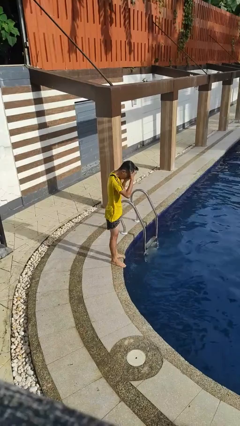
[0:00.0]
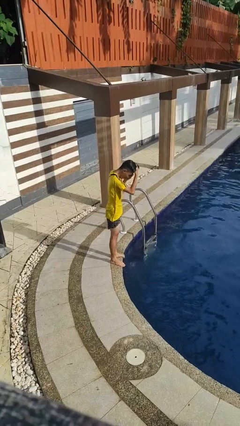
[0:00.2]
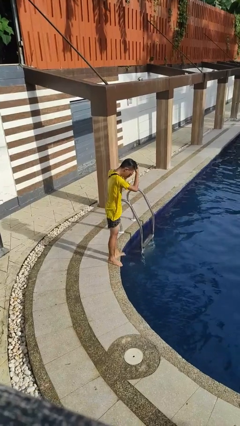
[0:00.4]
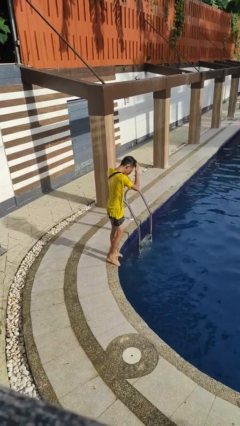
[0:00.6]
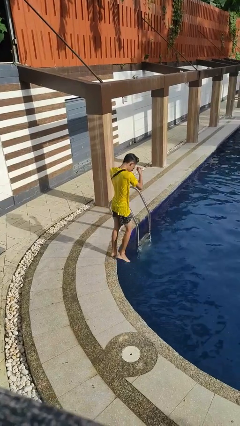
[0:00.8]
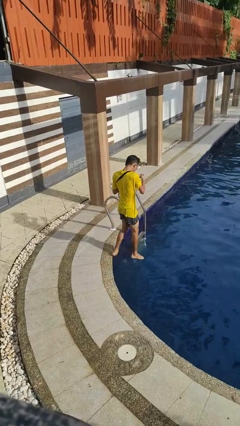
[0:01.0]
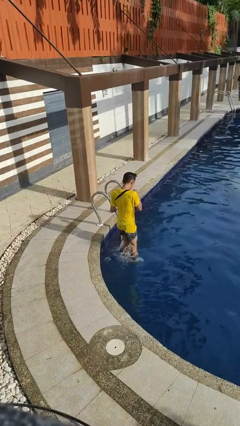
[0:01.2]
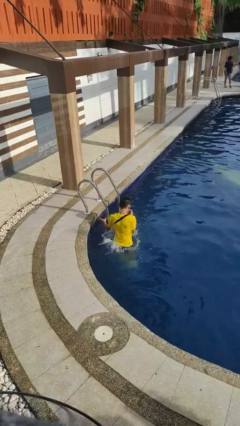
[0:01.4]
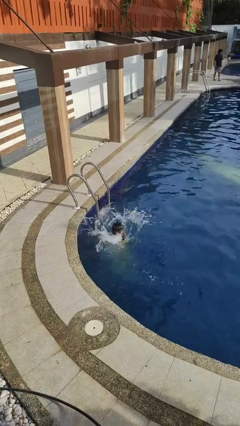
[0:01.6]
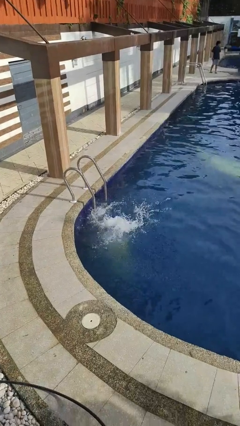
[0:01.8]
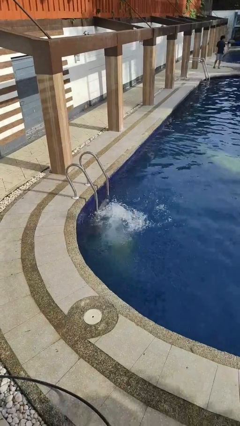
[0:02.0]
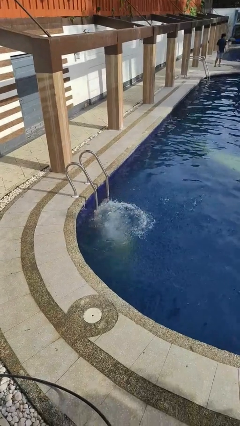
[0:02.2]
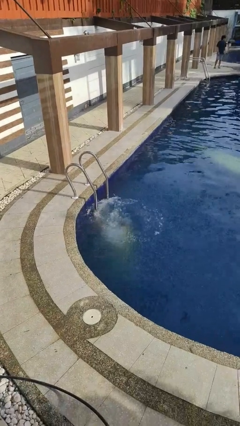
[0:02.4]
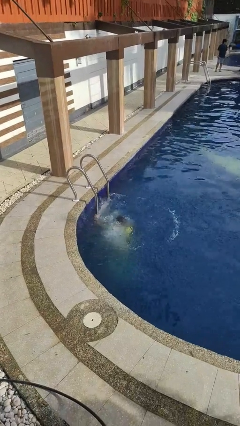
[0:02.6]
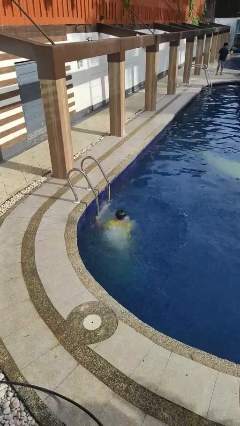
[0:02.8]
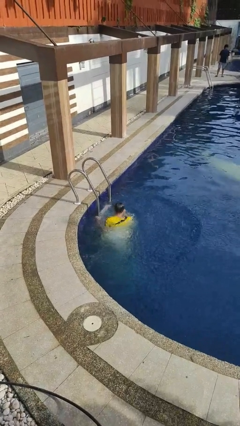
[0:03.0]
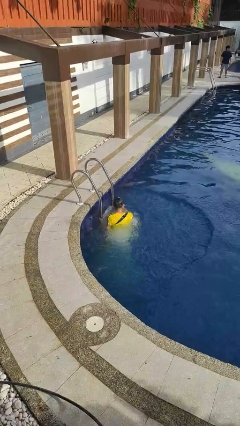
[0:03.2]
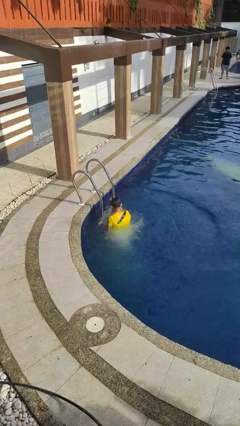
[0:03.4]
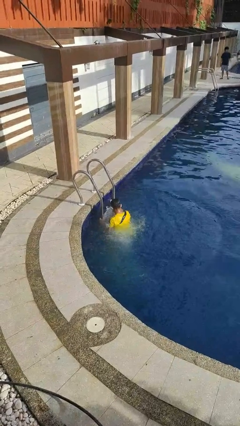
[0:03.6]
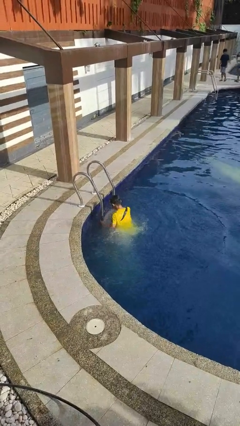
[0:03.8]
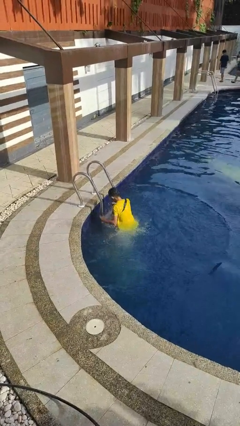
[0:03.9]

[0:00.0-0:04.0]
person falls into pool

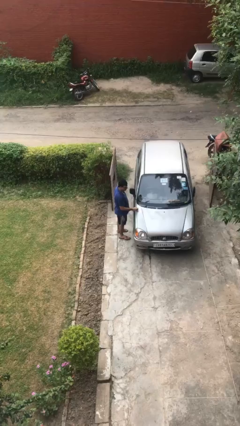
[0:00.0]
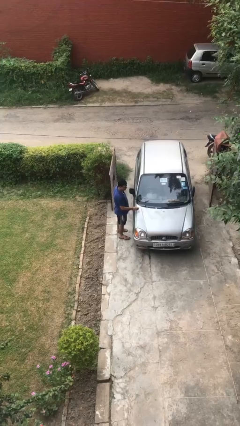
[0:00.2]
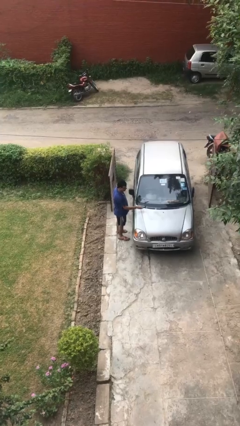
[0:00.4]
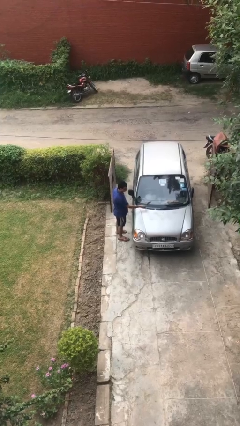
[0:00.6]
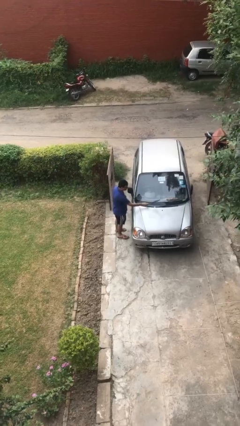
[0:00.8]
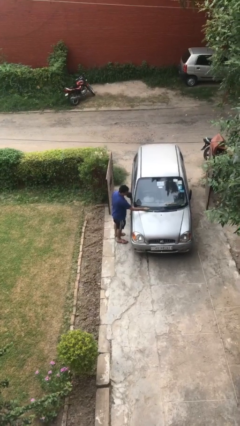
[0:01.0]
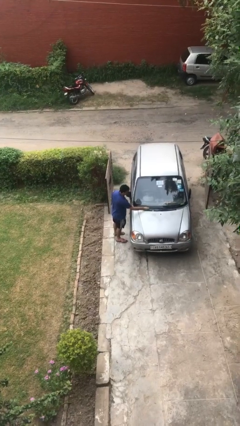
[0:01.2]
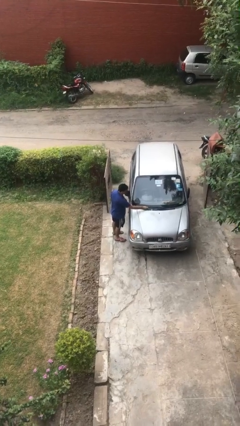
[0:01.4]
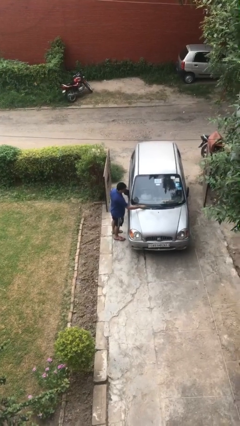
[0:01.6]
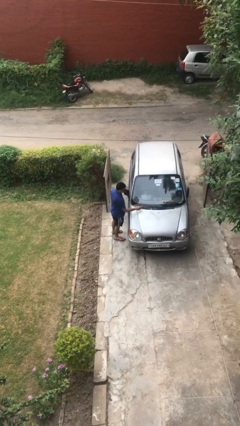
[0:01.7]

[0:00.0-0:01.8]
person flips down car wipers

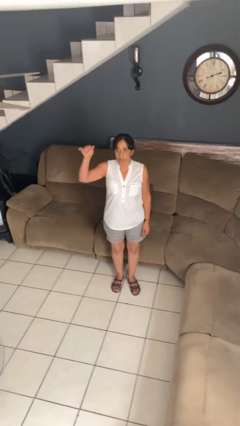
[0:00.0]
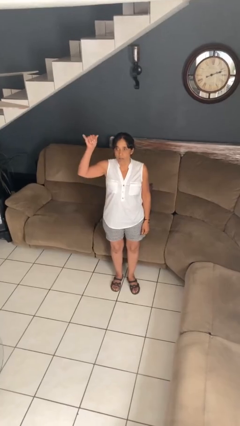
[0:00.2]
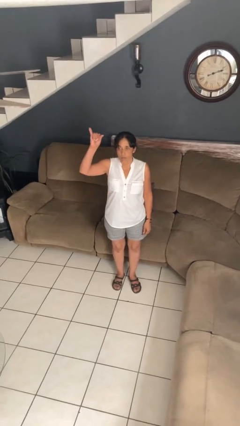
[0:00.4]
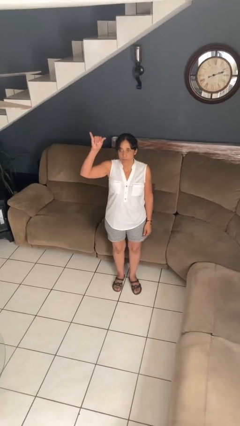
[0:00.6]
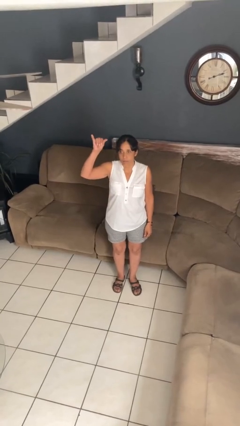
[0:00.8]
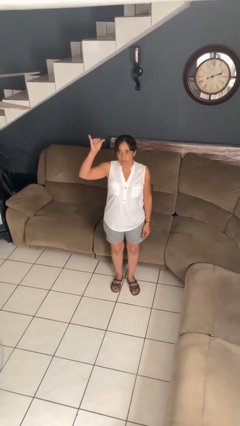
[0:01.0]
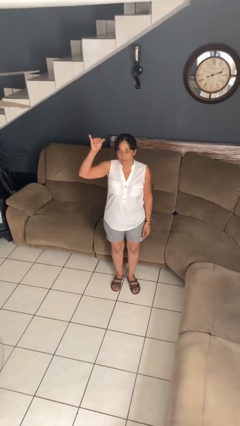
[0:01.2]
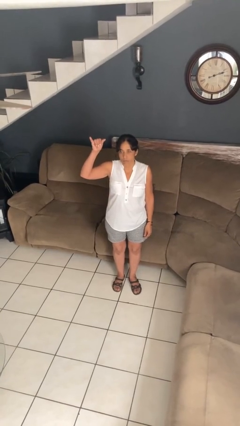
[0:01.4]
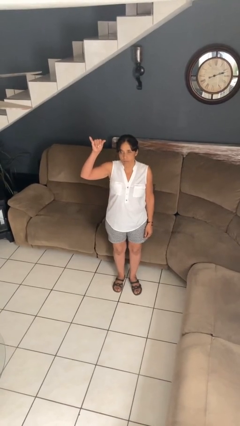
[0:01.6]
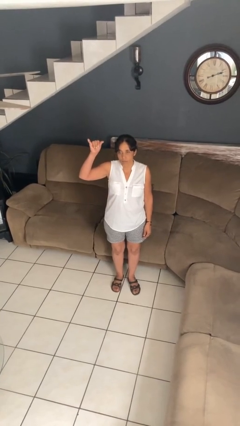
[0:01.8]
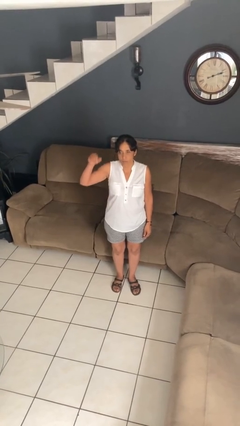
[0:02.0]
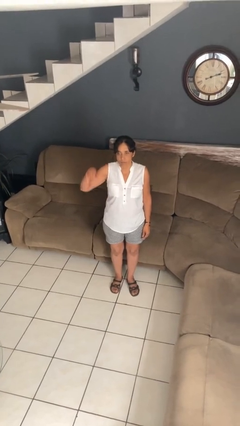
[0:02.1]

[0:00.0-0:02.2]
person gestures hang loose

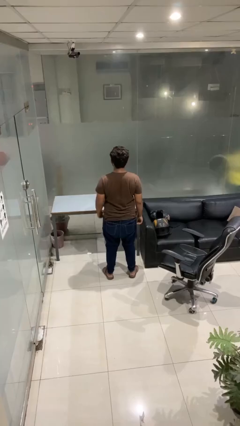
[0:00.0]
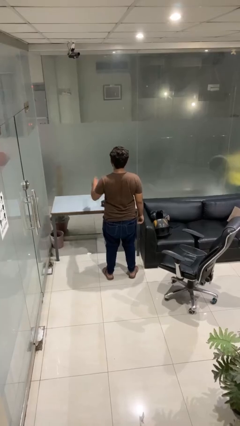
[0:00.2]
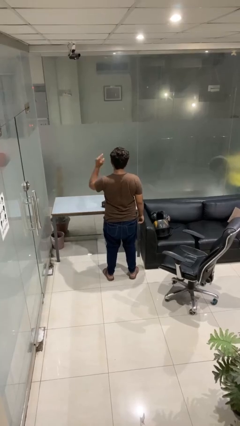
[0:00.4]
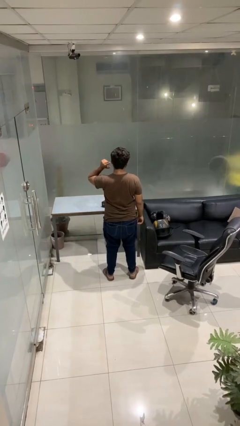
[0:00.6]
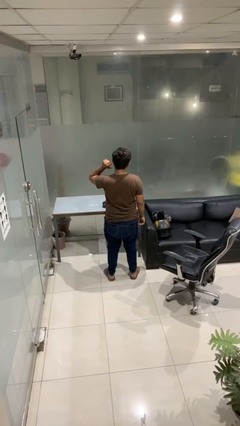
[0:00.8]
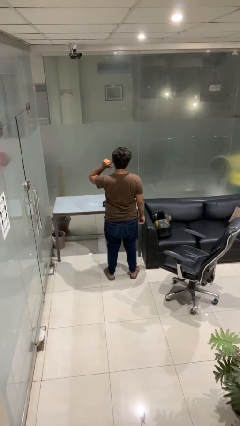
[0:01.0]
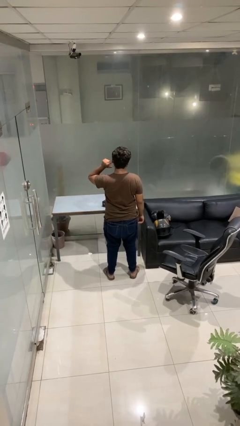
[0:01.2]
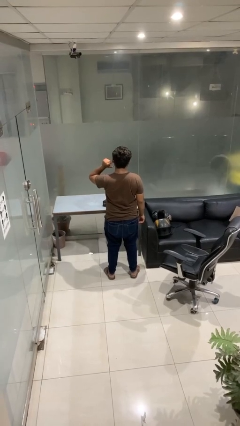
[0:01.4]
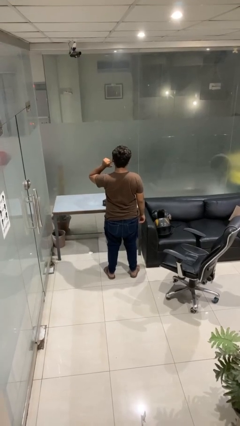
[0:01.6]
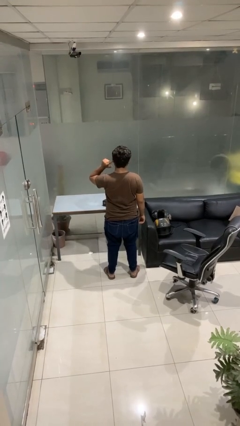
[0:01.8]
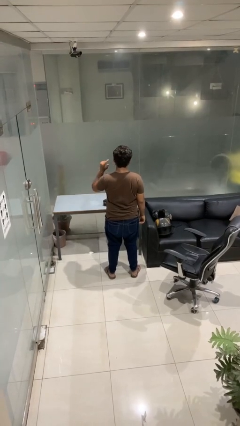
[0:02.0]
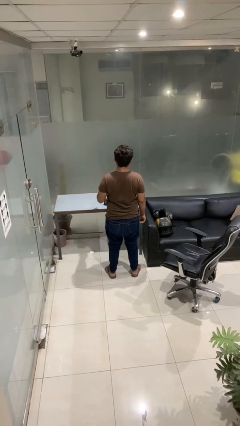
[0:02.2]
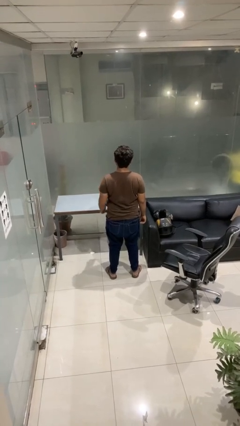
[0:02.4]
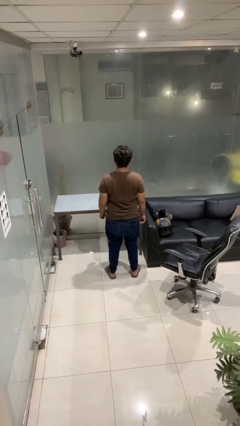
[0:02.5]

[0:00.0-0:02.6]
person gestures listen closely

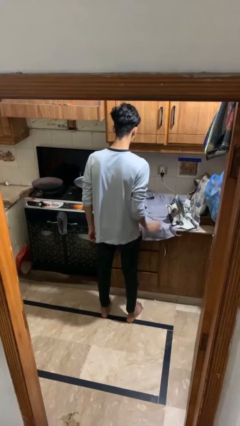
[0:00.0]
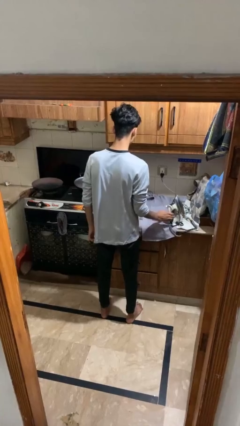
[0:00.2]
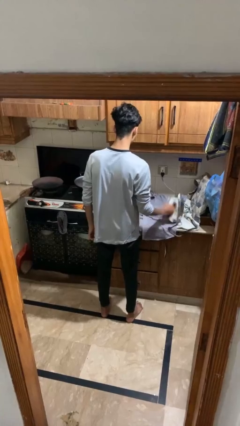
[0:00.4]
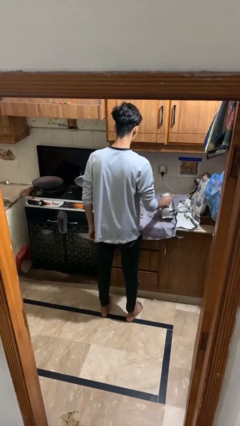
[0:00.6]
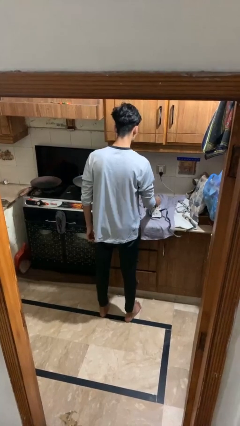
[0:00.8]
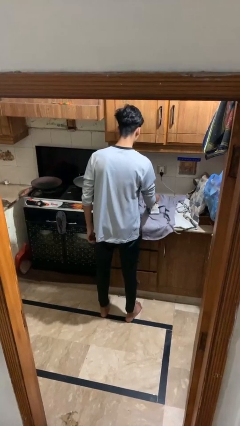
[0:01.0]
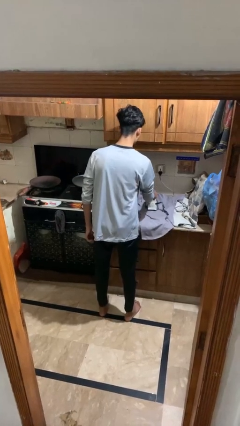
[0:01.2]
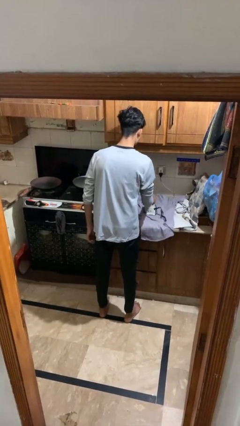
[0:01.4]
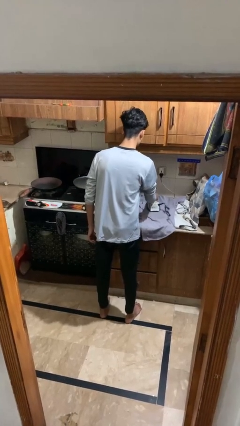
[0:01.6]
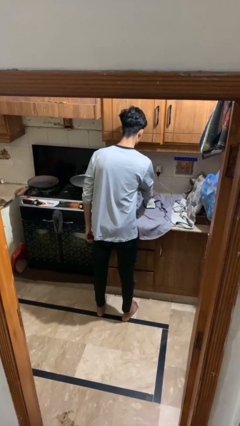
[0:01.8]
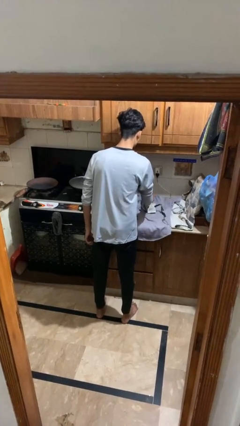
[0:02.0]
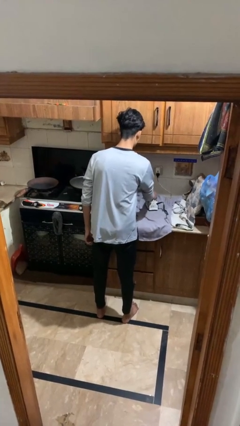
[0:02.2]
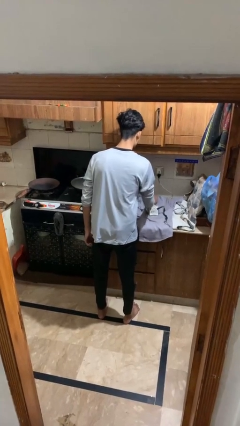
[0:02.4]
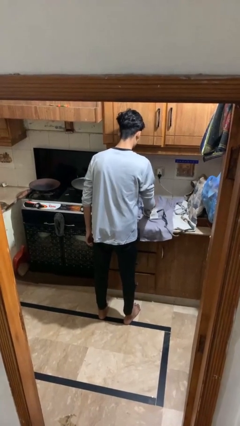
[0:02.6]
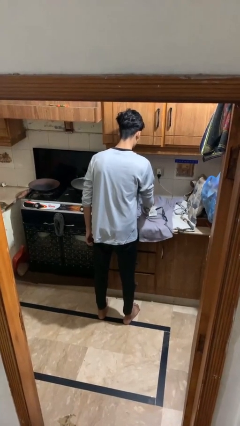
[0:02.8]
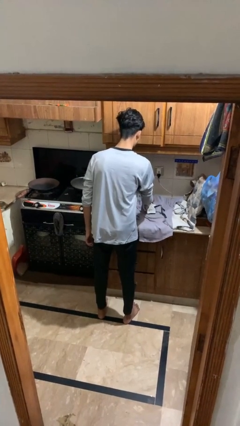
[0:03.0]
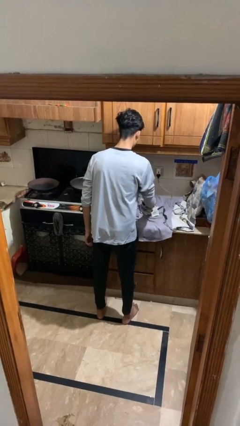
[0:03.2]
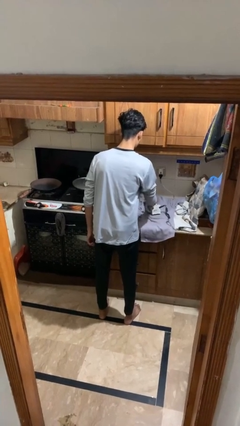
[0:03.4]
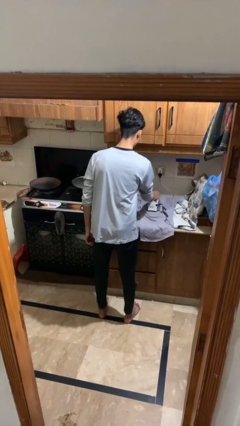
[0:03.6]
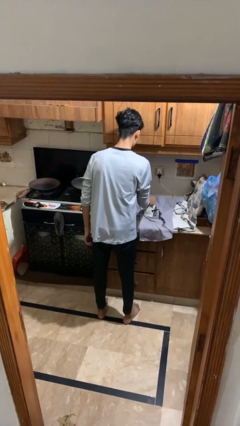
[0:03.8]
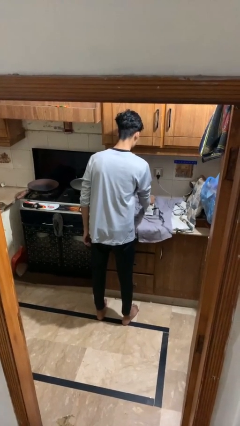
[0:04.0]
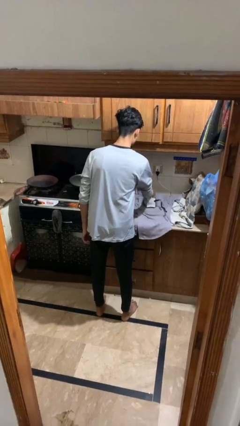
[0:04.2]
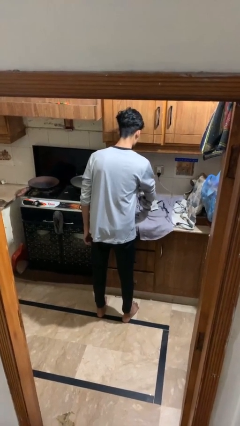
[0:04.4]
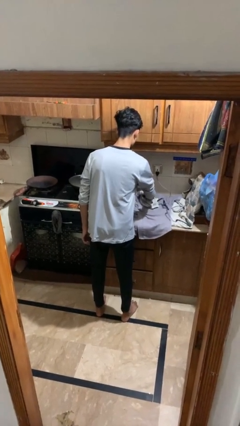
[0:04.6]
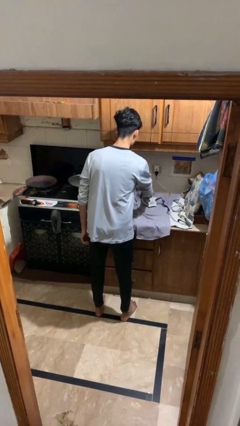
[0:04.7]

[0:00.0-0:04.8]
person irons clothes

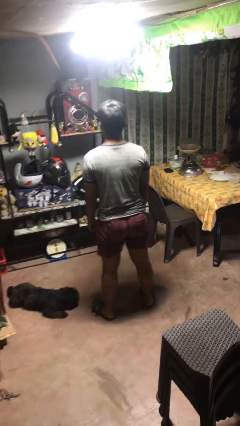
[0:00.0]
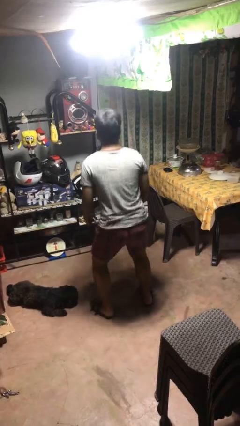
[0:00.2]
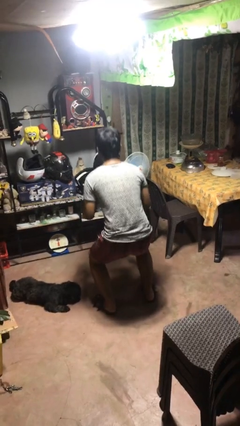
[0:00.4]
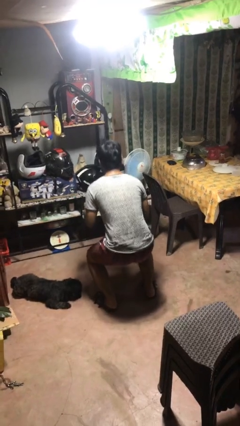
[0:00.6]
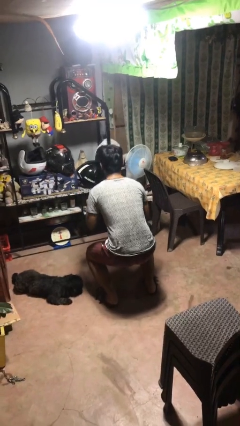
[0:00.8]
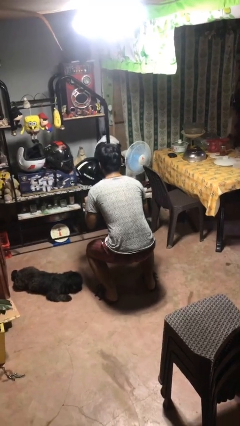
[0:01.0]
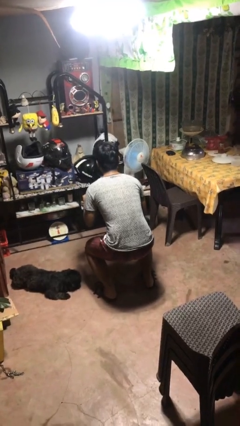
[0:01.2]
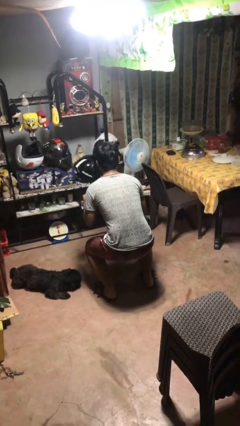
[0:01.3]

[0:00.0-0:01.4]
person squats

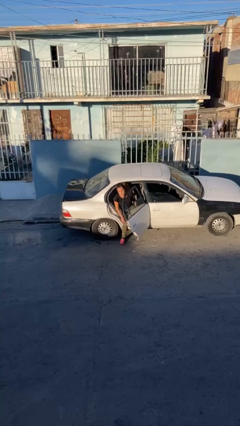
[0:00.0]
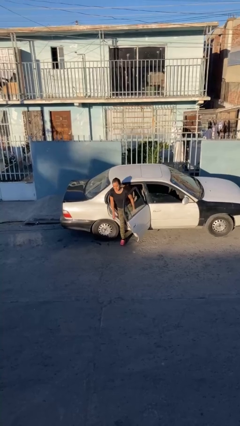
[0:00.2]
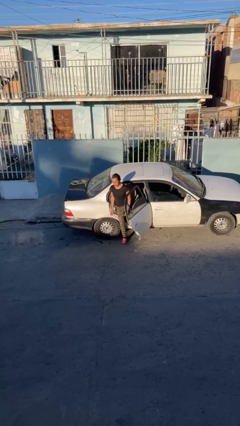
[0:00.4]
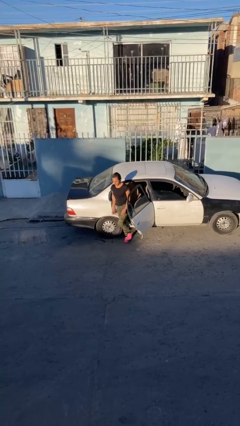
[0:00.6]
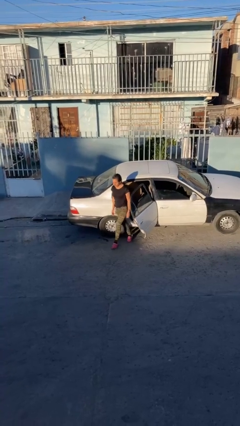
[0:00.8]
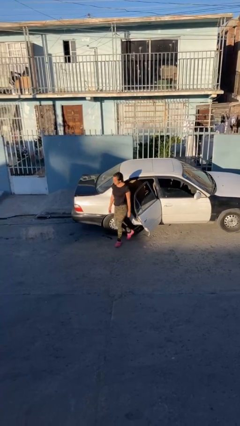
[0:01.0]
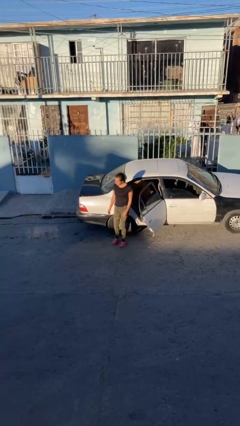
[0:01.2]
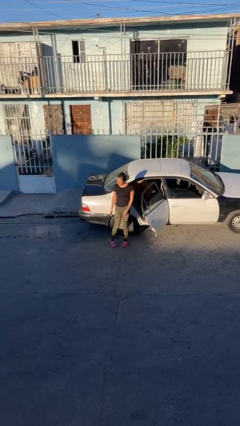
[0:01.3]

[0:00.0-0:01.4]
person exits car
